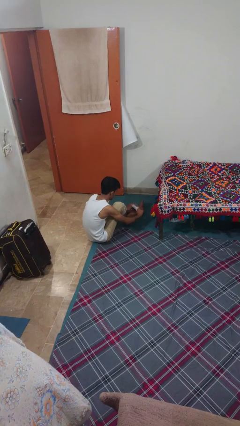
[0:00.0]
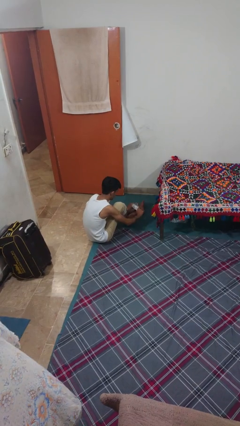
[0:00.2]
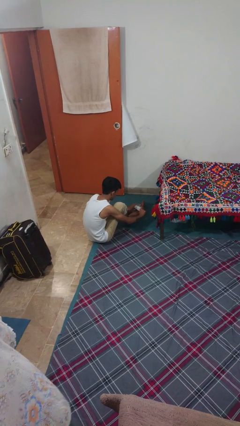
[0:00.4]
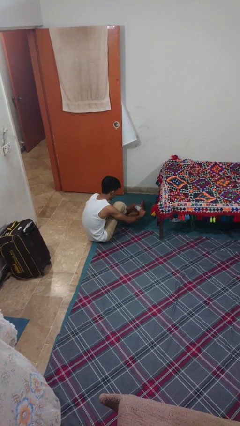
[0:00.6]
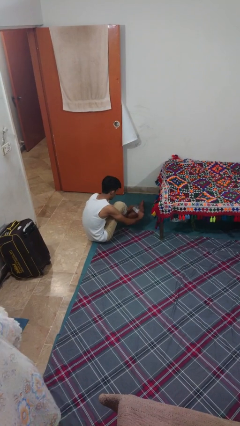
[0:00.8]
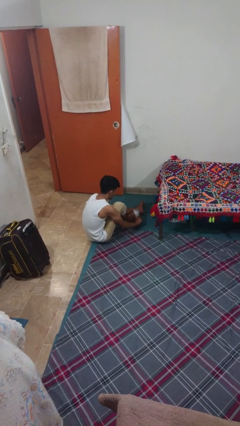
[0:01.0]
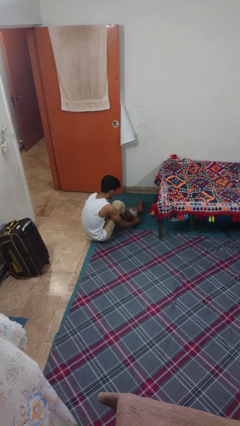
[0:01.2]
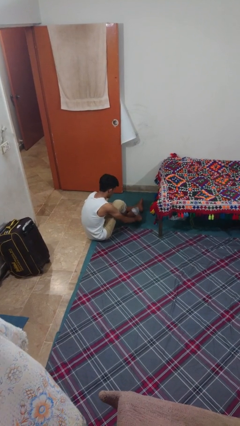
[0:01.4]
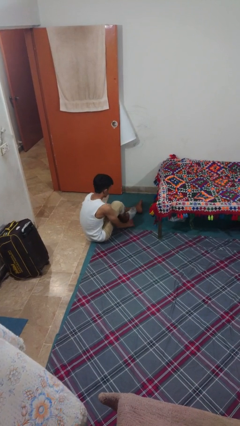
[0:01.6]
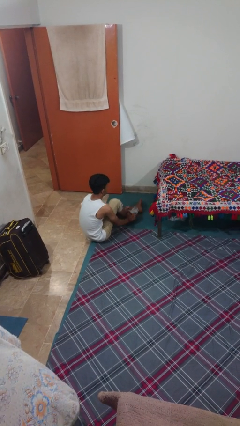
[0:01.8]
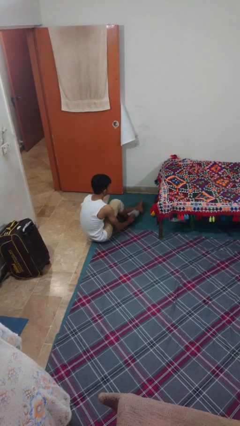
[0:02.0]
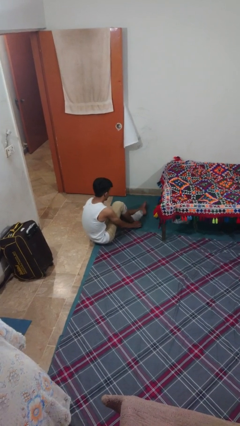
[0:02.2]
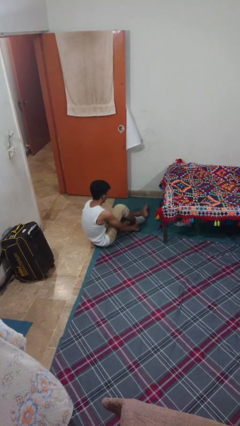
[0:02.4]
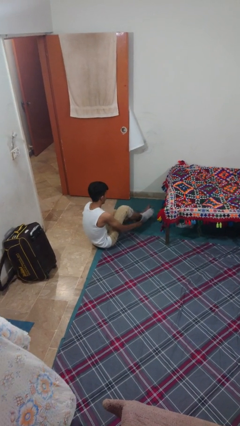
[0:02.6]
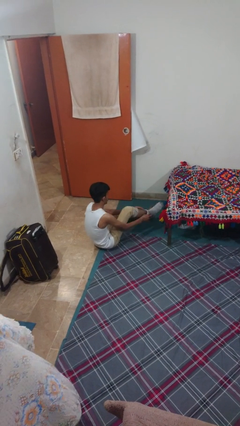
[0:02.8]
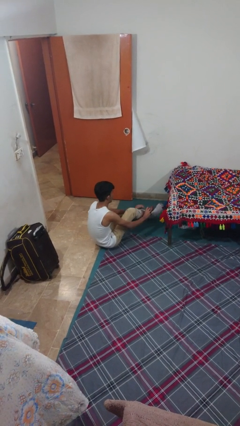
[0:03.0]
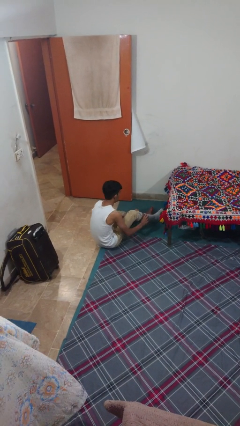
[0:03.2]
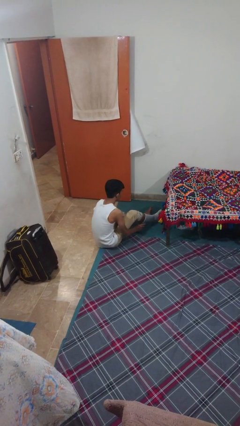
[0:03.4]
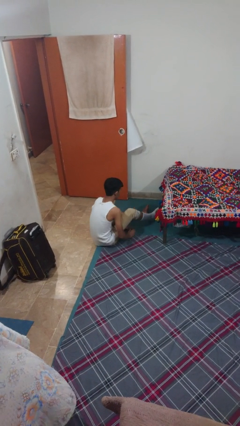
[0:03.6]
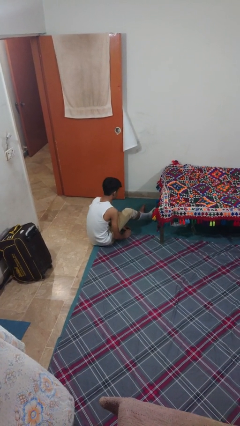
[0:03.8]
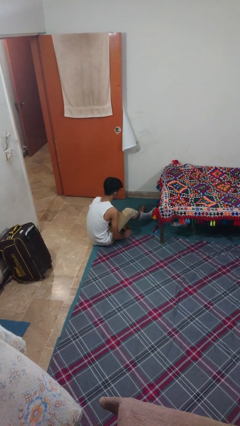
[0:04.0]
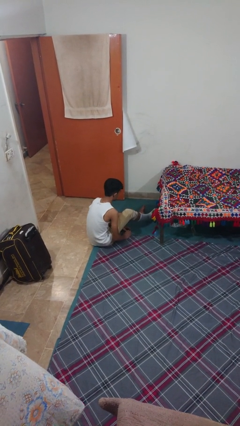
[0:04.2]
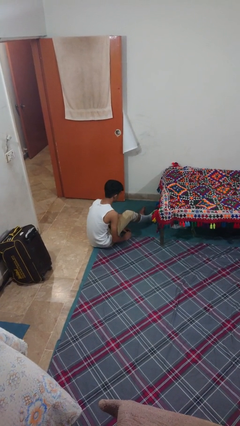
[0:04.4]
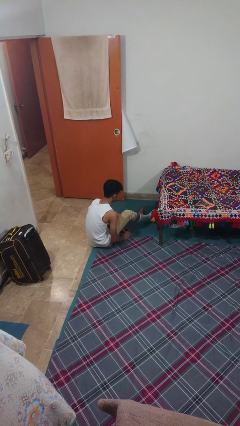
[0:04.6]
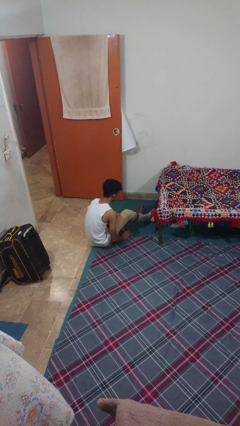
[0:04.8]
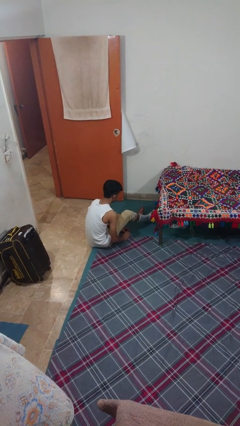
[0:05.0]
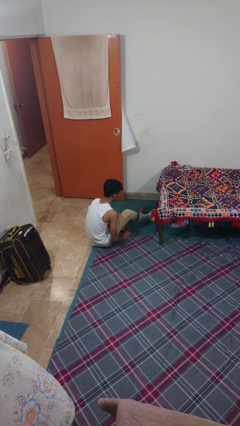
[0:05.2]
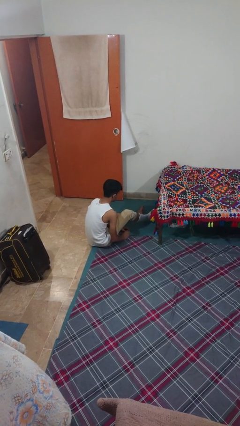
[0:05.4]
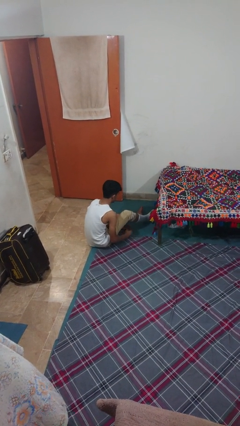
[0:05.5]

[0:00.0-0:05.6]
person puts on socks

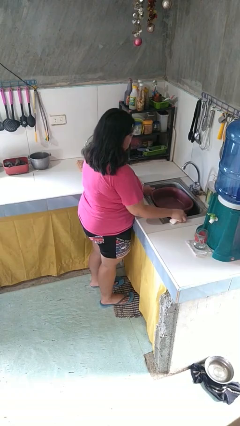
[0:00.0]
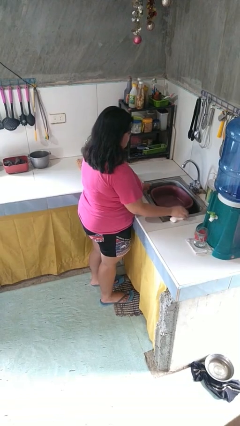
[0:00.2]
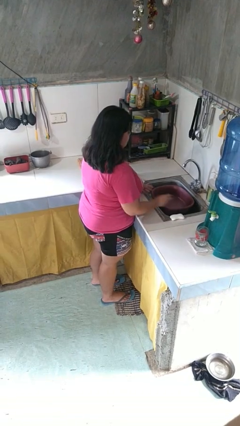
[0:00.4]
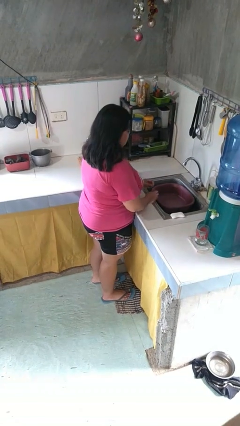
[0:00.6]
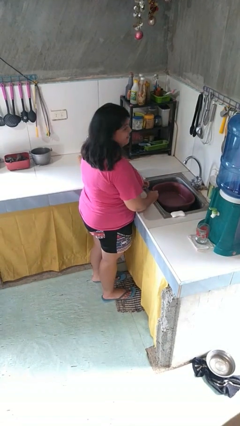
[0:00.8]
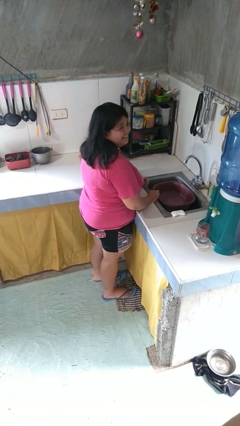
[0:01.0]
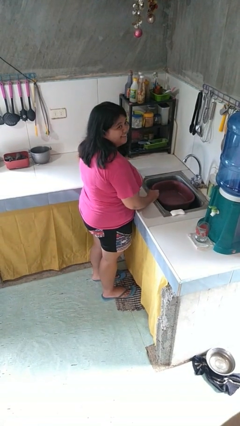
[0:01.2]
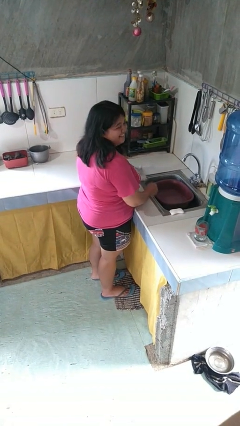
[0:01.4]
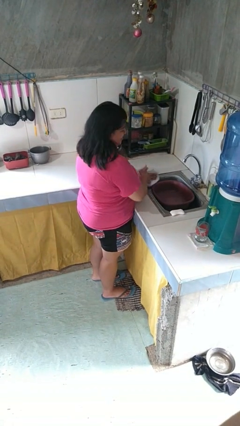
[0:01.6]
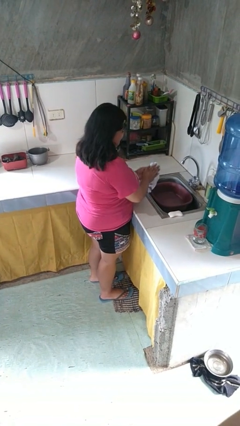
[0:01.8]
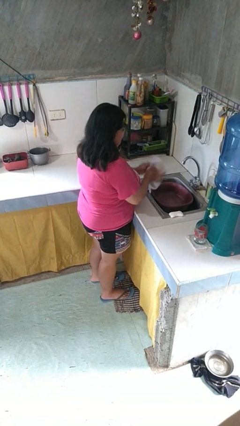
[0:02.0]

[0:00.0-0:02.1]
person dries hands with towel

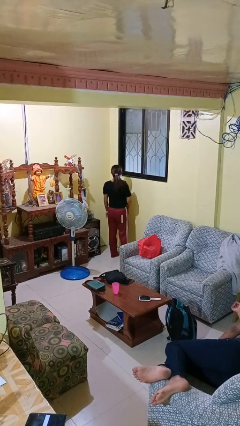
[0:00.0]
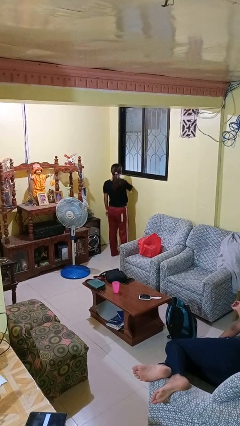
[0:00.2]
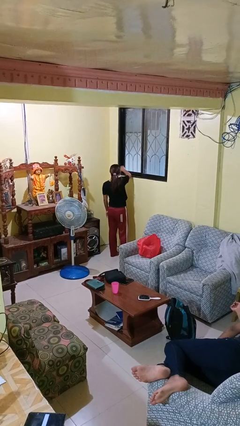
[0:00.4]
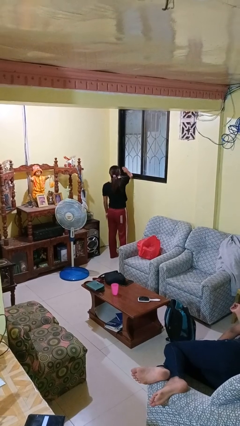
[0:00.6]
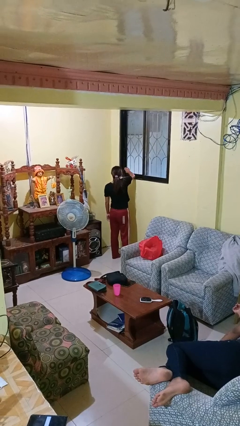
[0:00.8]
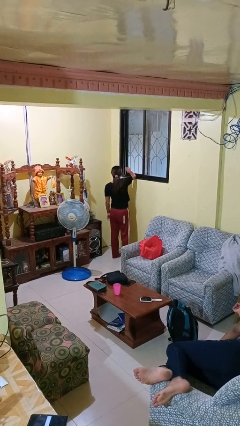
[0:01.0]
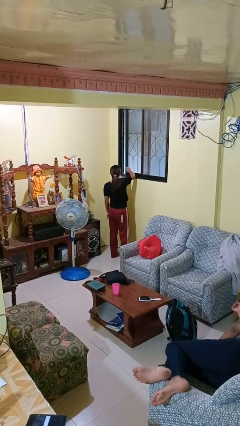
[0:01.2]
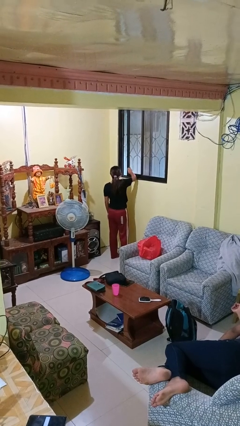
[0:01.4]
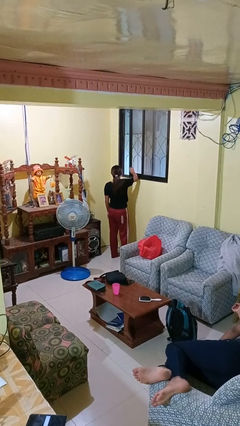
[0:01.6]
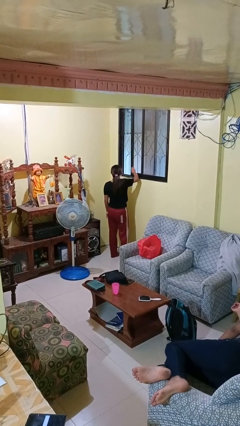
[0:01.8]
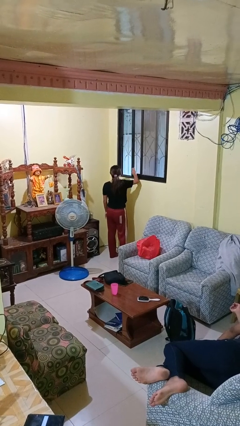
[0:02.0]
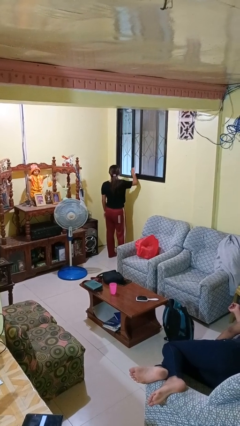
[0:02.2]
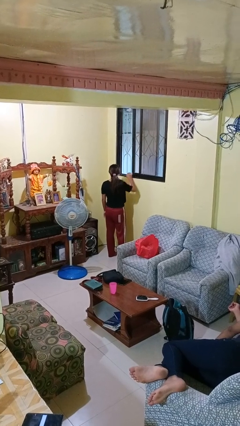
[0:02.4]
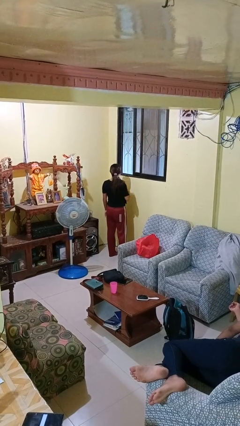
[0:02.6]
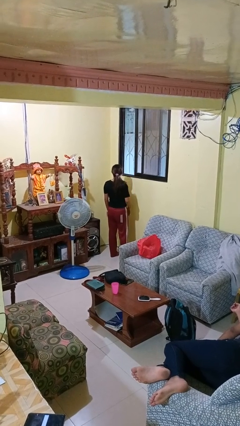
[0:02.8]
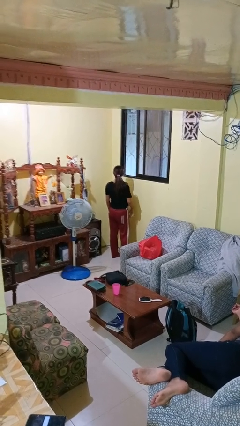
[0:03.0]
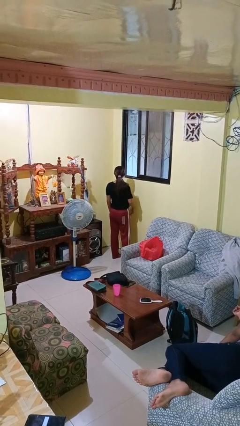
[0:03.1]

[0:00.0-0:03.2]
person opens home window

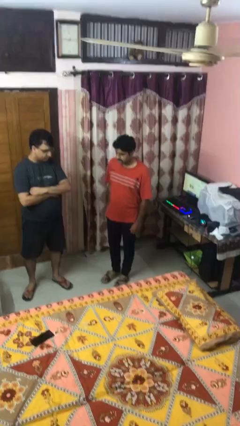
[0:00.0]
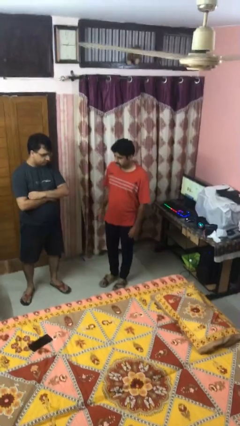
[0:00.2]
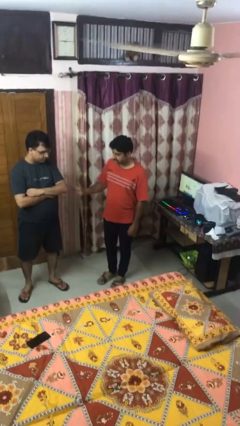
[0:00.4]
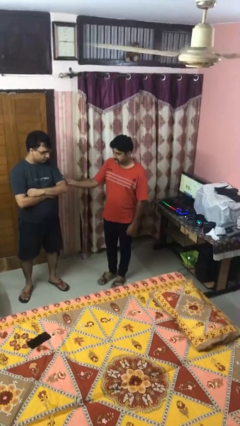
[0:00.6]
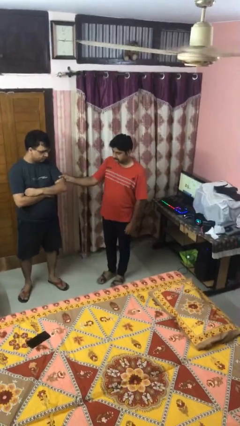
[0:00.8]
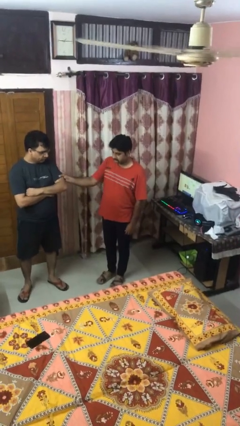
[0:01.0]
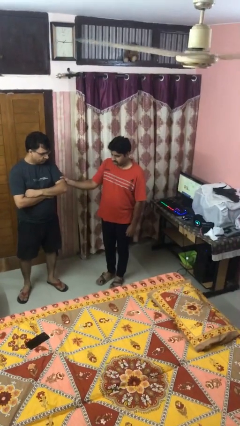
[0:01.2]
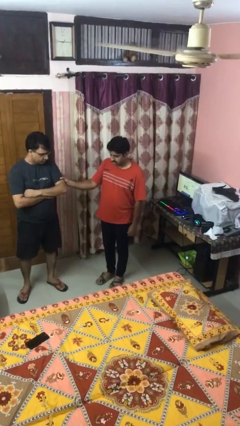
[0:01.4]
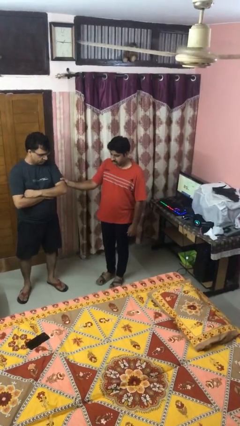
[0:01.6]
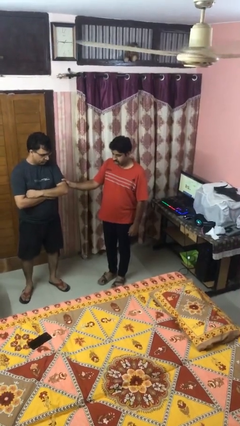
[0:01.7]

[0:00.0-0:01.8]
person grabs person by bicep

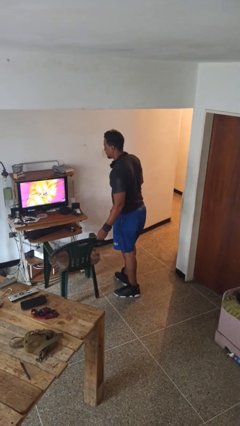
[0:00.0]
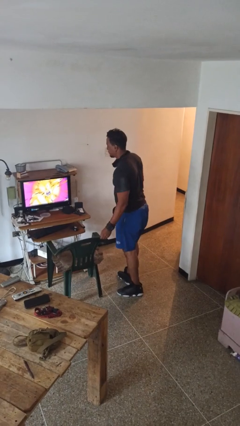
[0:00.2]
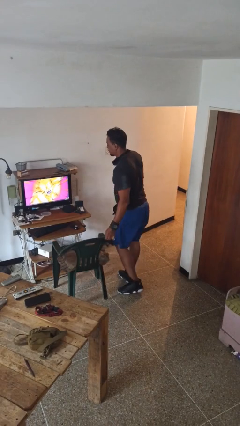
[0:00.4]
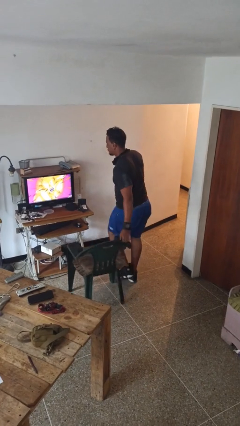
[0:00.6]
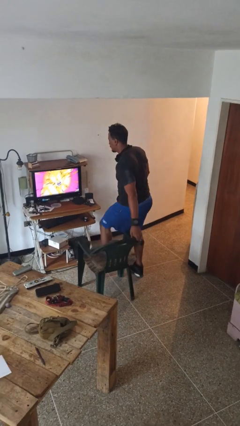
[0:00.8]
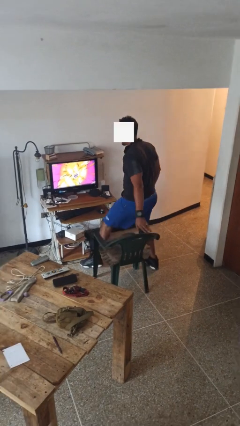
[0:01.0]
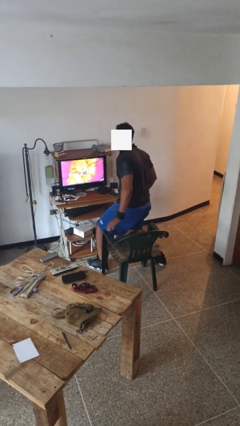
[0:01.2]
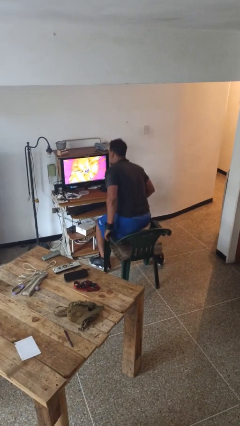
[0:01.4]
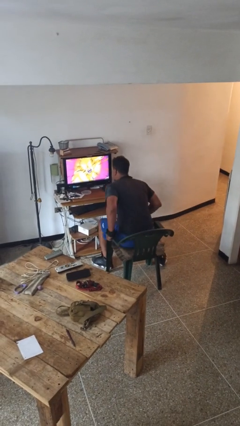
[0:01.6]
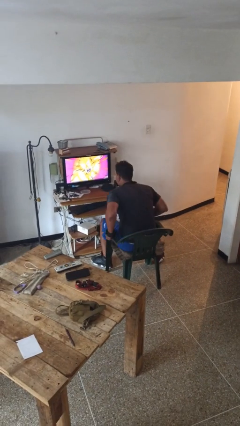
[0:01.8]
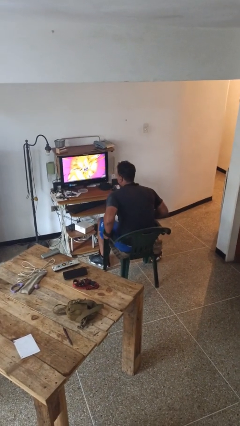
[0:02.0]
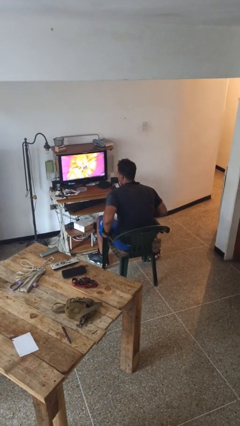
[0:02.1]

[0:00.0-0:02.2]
person sits down

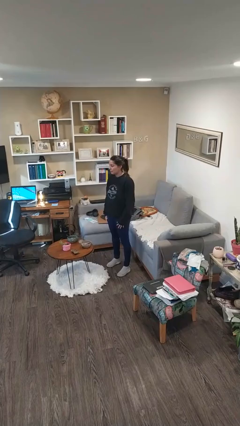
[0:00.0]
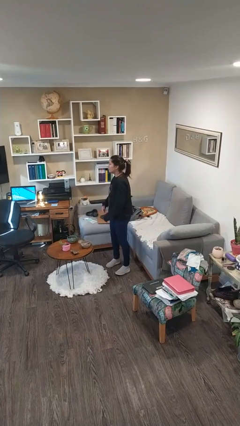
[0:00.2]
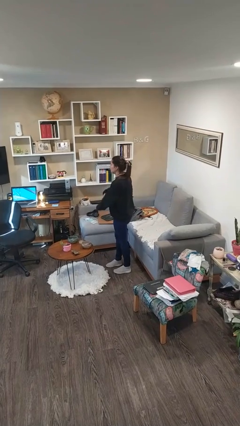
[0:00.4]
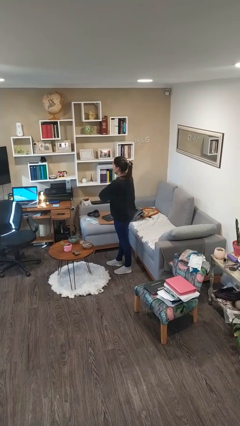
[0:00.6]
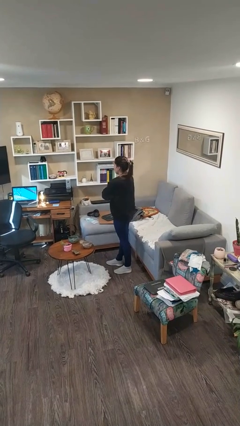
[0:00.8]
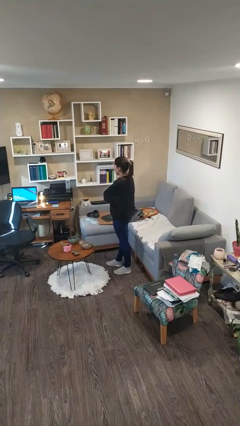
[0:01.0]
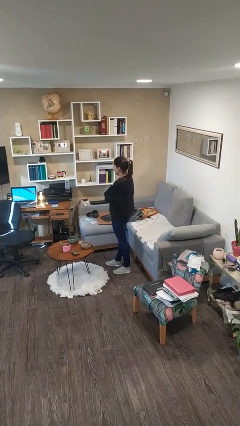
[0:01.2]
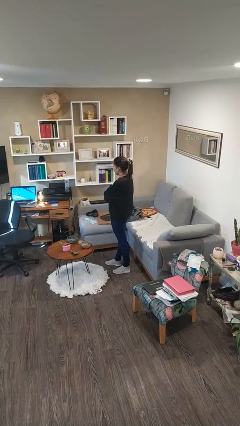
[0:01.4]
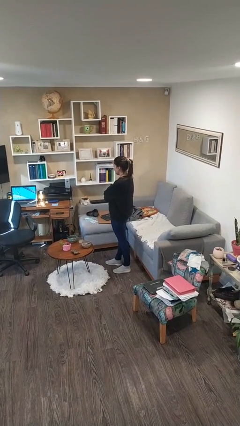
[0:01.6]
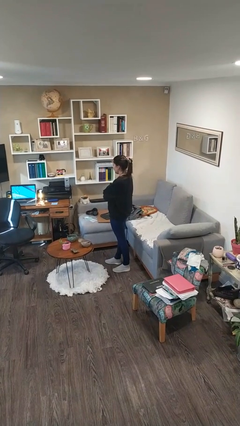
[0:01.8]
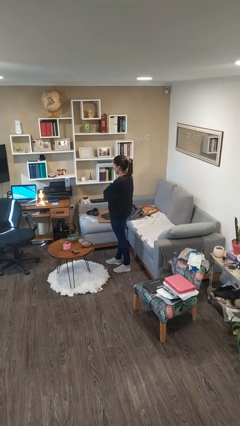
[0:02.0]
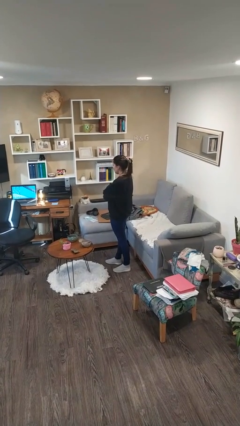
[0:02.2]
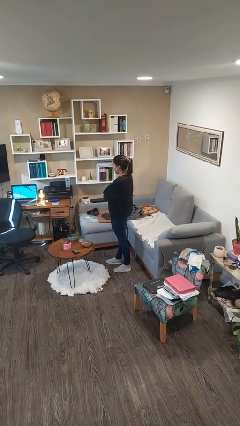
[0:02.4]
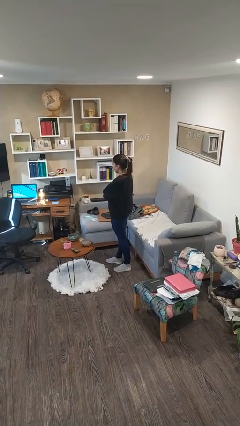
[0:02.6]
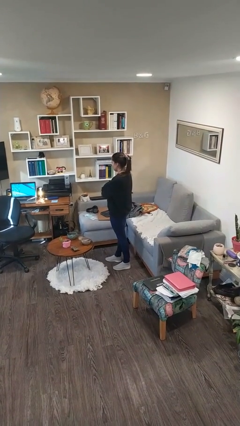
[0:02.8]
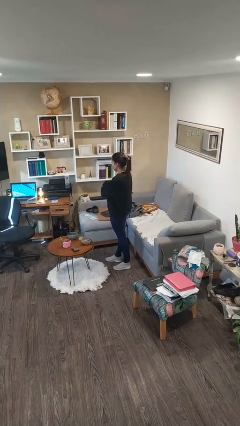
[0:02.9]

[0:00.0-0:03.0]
person crosses arms
